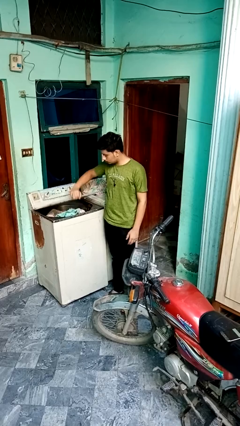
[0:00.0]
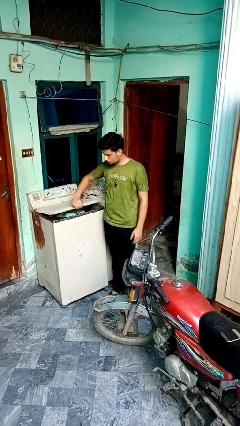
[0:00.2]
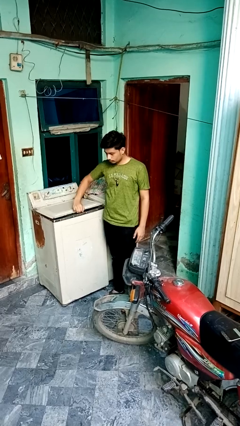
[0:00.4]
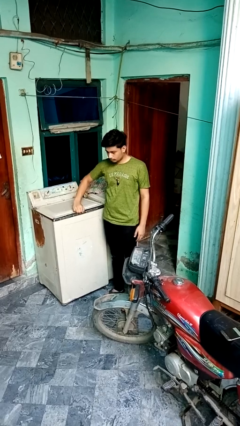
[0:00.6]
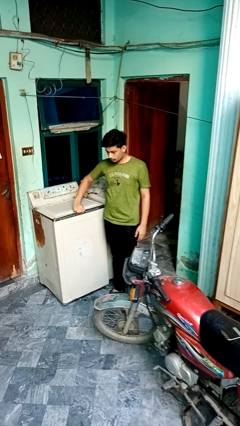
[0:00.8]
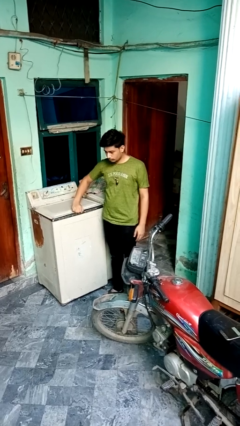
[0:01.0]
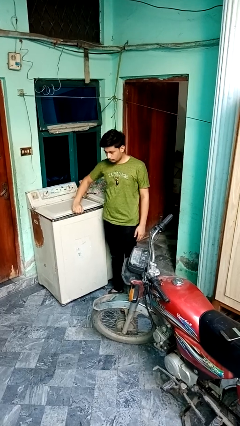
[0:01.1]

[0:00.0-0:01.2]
person closes clothes washer

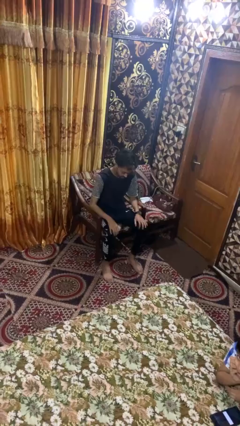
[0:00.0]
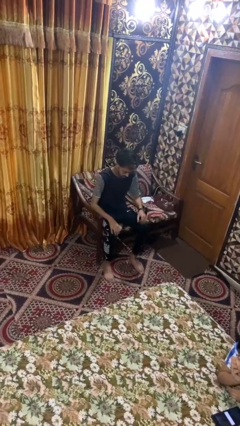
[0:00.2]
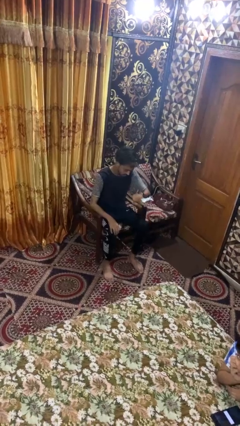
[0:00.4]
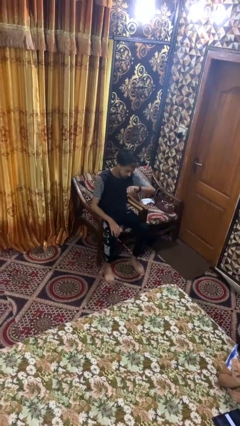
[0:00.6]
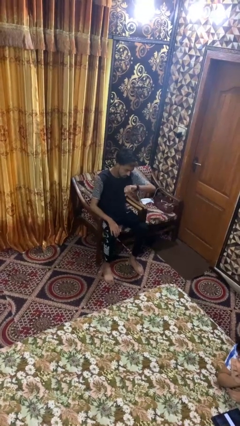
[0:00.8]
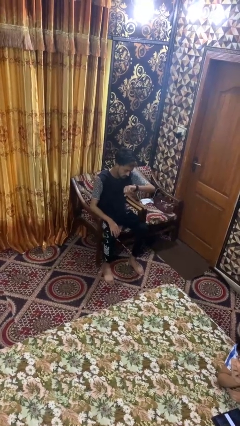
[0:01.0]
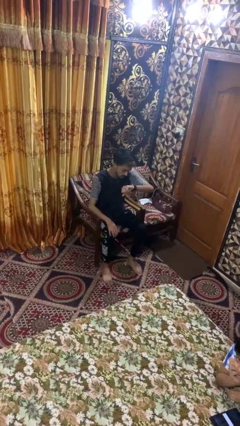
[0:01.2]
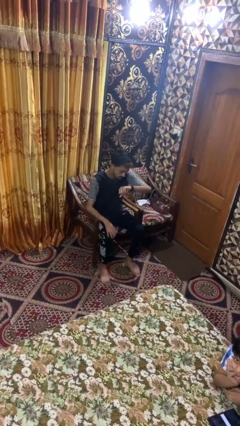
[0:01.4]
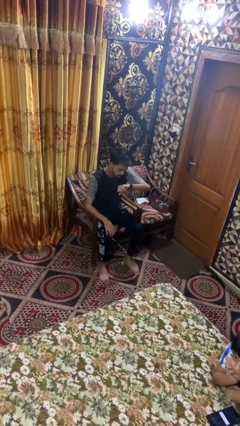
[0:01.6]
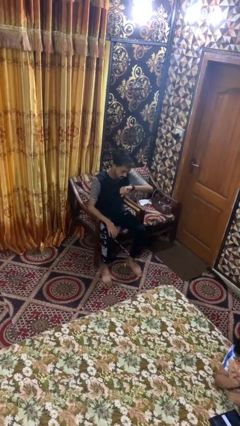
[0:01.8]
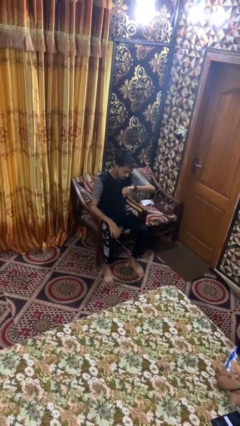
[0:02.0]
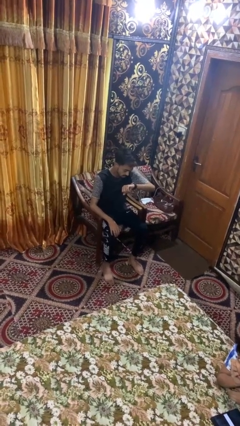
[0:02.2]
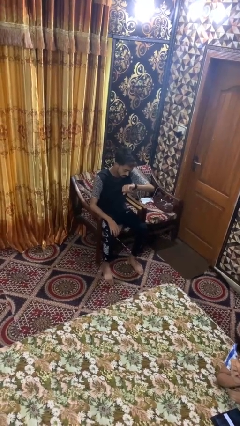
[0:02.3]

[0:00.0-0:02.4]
person looks at wristwatch

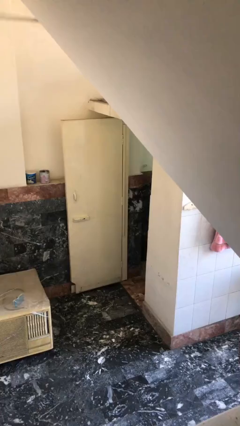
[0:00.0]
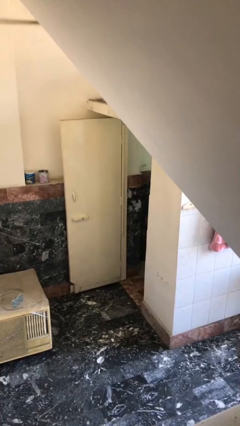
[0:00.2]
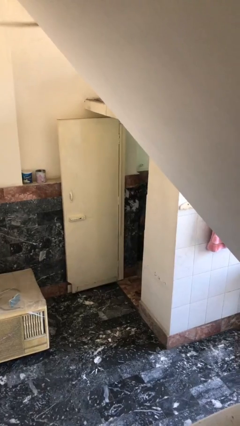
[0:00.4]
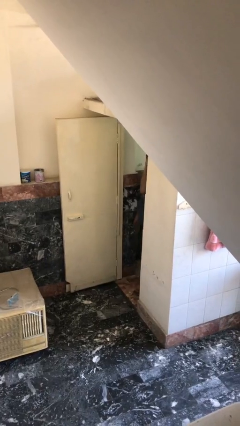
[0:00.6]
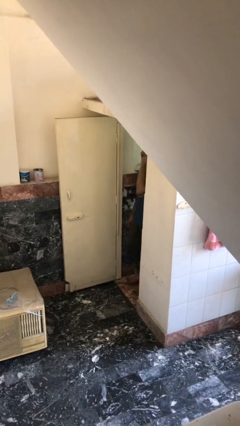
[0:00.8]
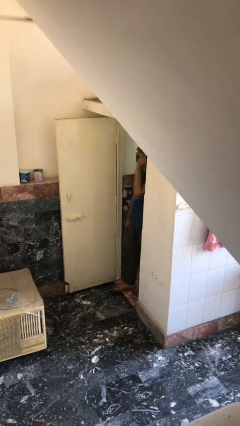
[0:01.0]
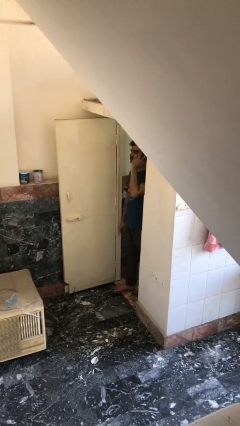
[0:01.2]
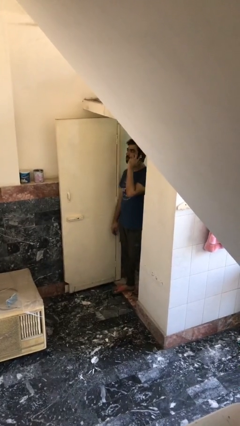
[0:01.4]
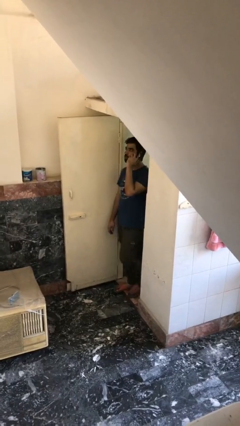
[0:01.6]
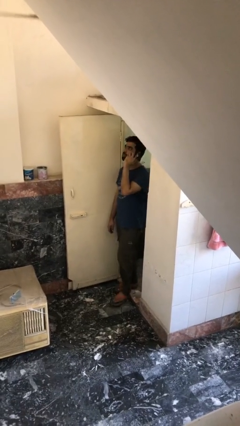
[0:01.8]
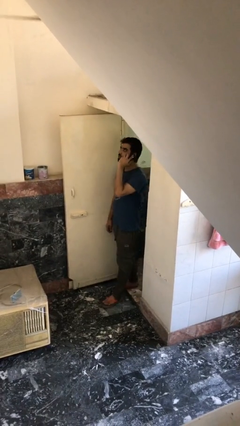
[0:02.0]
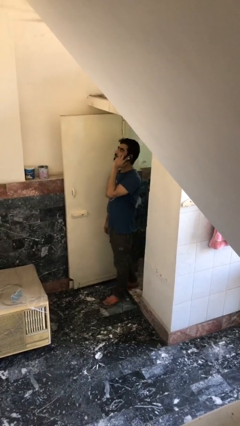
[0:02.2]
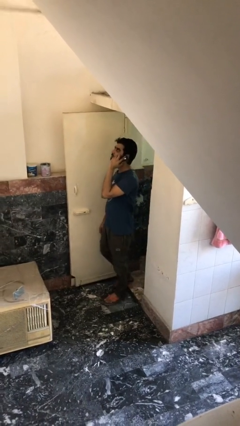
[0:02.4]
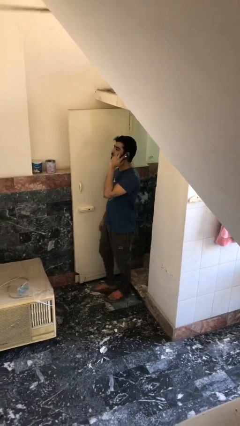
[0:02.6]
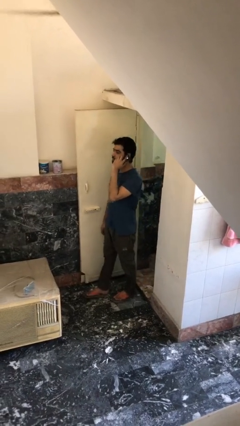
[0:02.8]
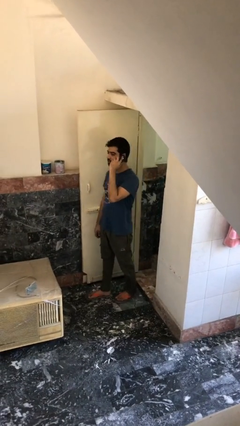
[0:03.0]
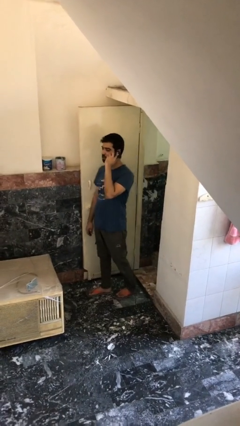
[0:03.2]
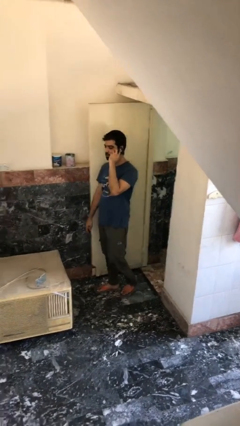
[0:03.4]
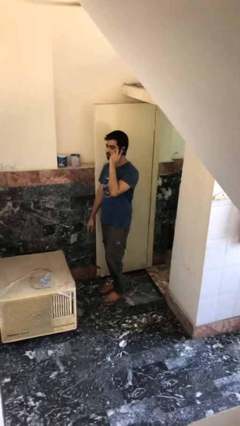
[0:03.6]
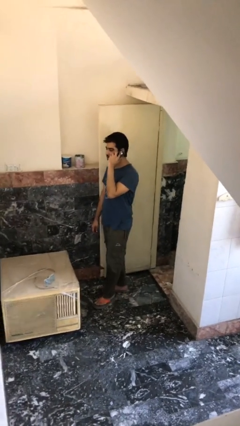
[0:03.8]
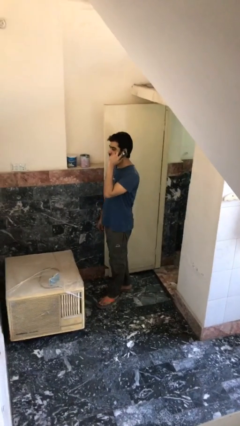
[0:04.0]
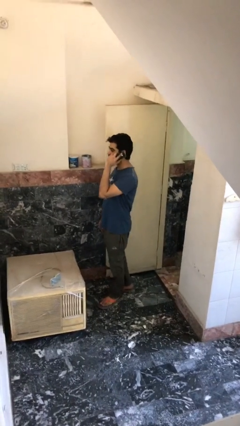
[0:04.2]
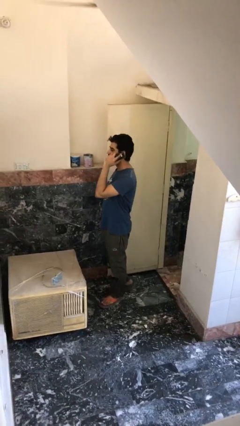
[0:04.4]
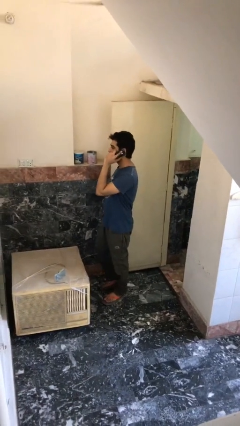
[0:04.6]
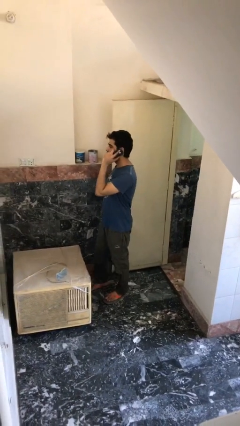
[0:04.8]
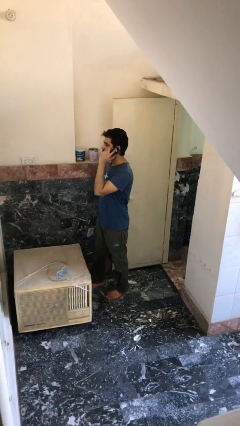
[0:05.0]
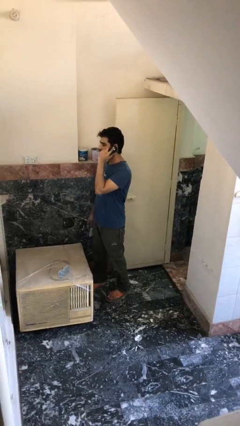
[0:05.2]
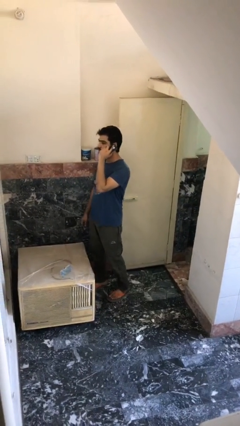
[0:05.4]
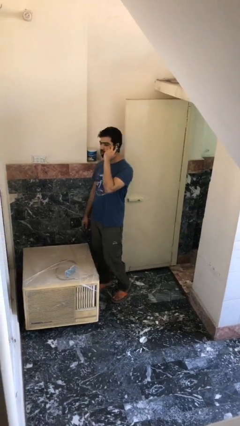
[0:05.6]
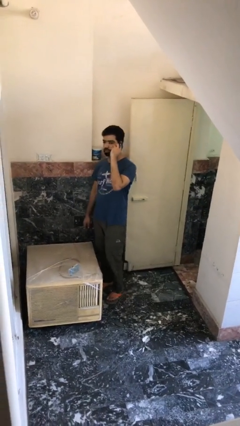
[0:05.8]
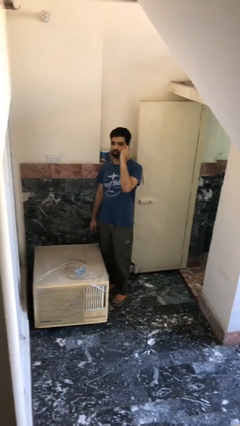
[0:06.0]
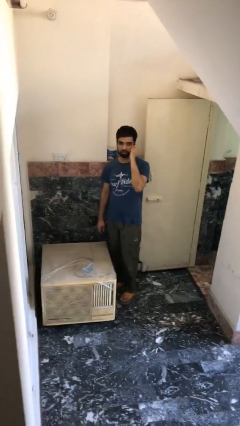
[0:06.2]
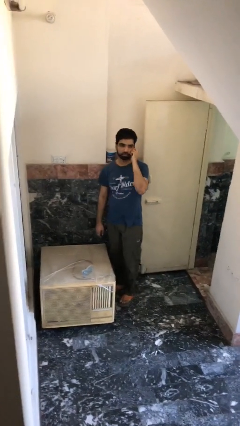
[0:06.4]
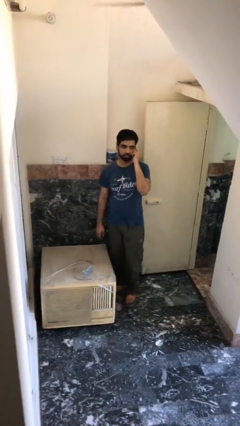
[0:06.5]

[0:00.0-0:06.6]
person enters scene through structure

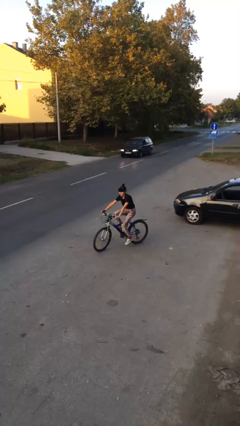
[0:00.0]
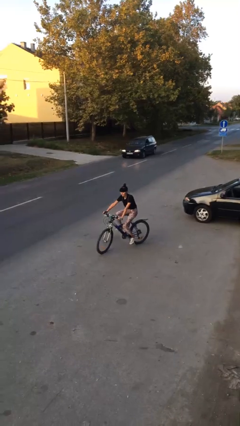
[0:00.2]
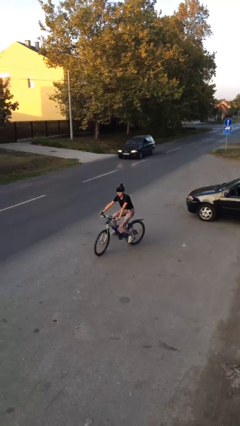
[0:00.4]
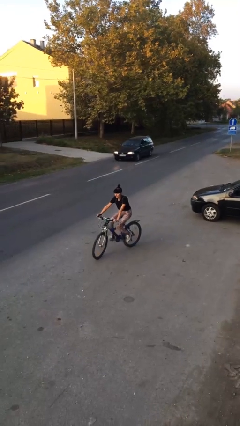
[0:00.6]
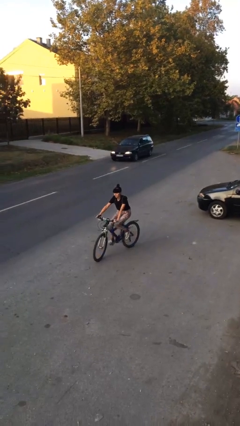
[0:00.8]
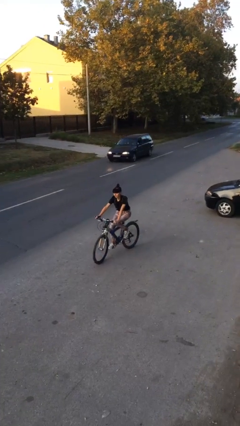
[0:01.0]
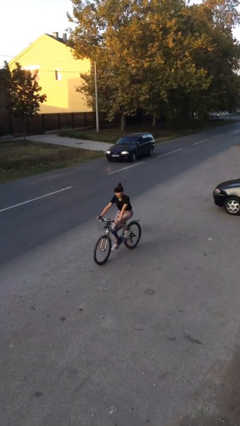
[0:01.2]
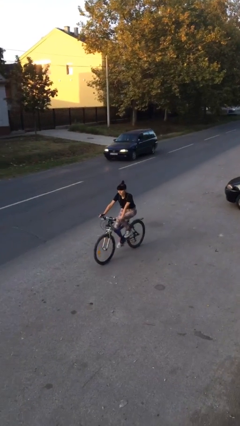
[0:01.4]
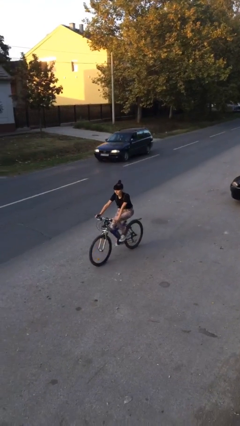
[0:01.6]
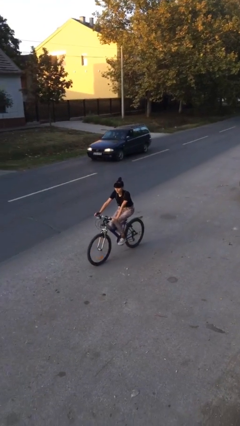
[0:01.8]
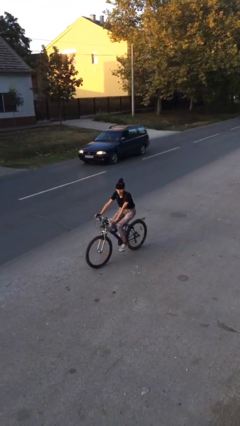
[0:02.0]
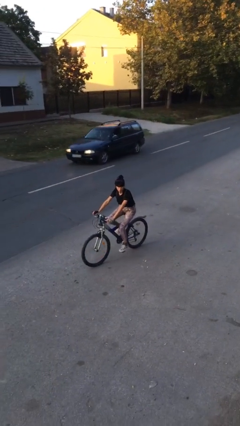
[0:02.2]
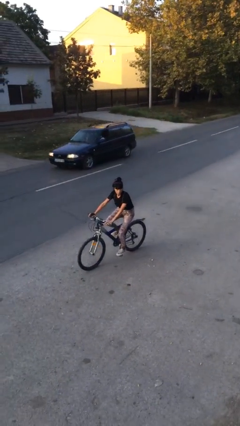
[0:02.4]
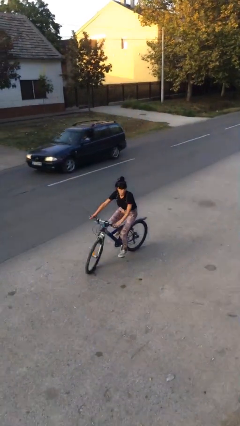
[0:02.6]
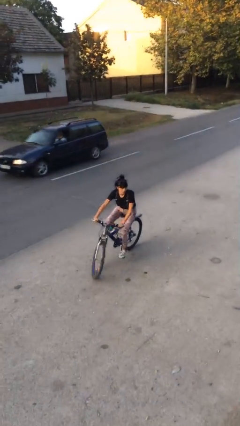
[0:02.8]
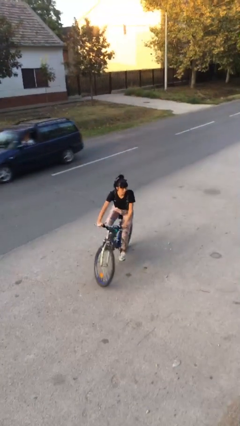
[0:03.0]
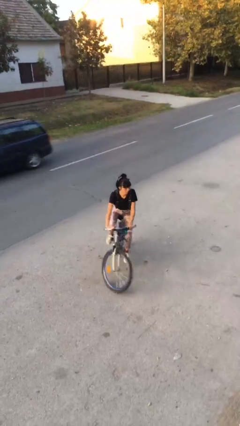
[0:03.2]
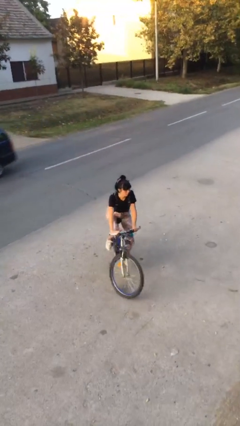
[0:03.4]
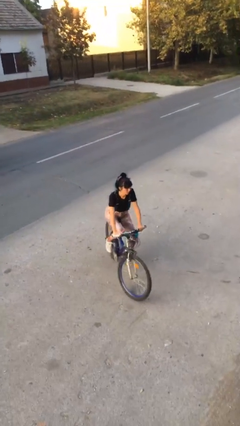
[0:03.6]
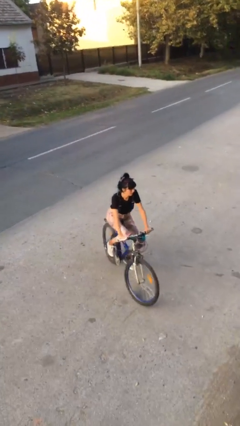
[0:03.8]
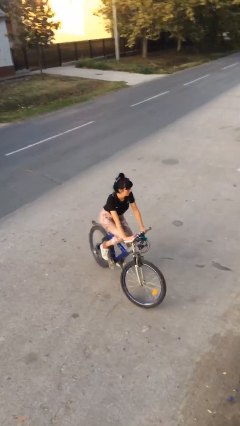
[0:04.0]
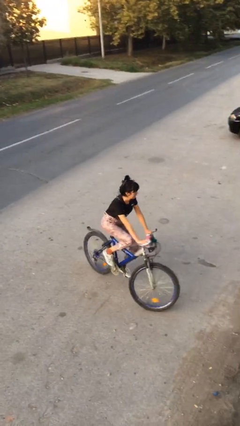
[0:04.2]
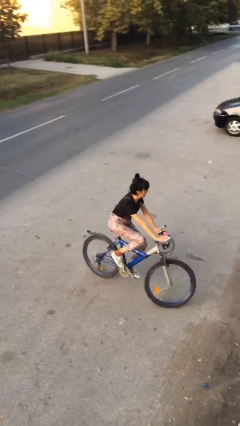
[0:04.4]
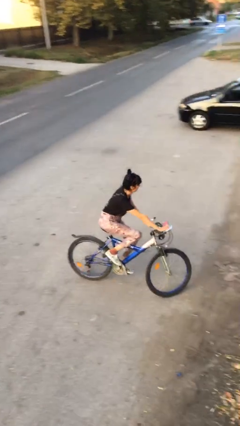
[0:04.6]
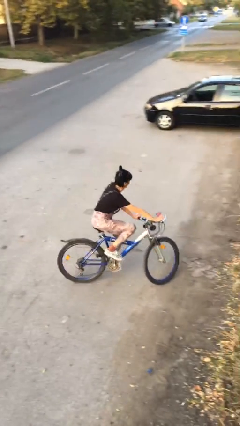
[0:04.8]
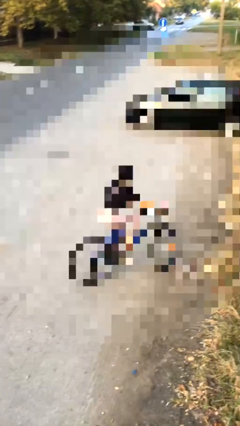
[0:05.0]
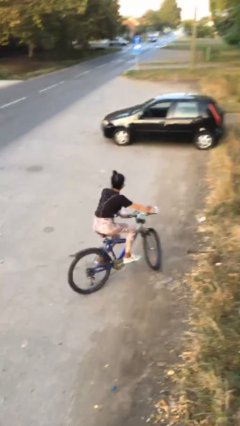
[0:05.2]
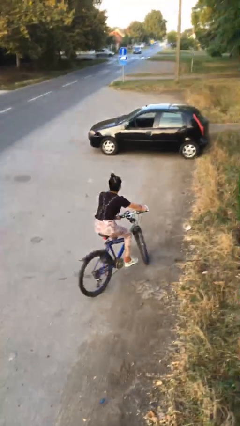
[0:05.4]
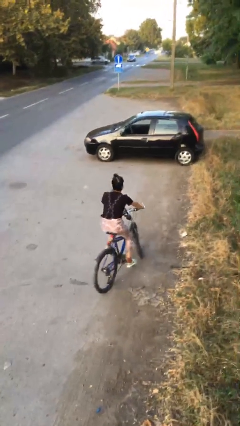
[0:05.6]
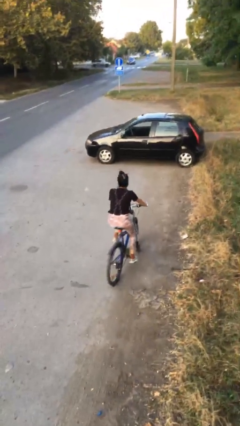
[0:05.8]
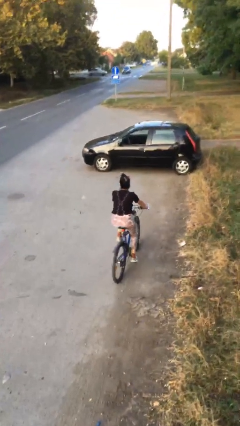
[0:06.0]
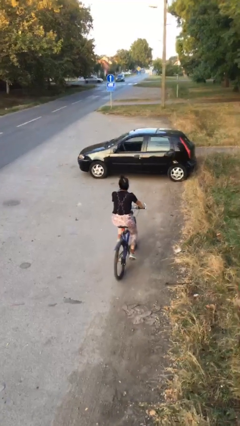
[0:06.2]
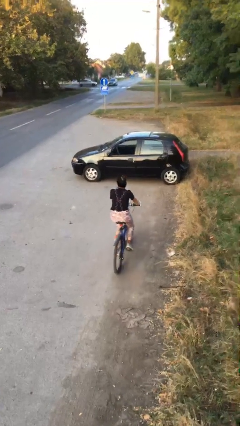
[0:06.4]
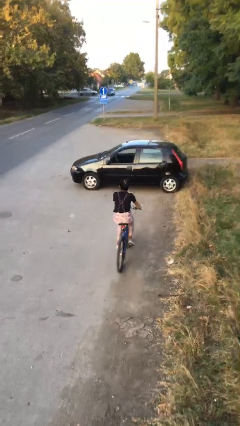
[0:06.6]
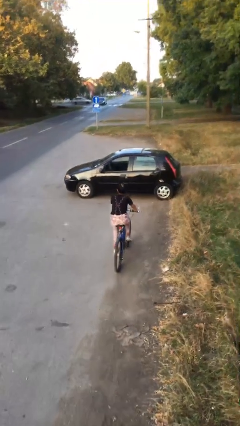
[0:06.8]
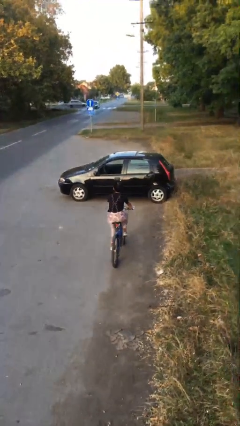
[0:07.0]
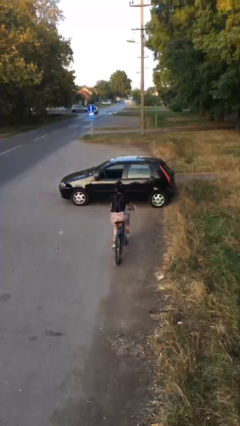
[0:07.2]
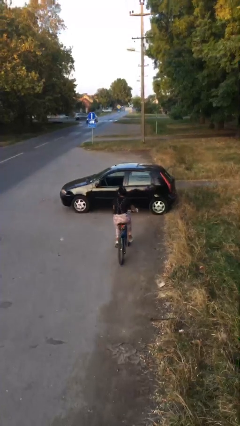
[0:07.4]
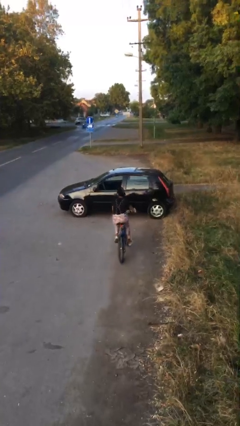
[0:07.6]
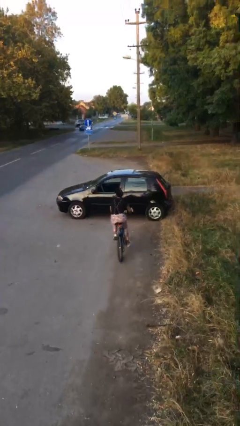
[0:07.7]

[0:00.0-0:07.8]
person rides bicycle
